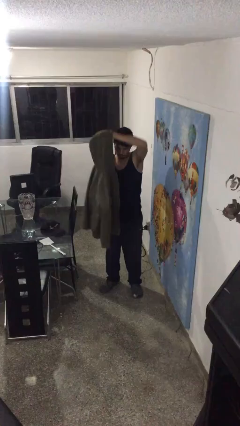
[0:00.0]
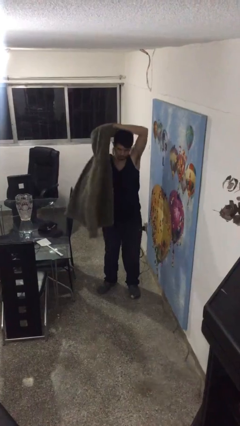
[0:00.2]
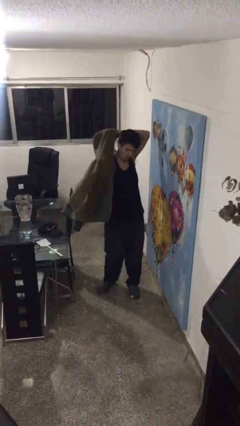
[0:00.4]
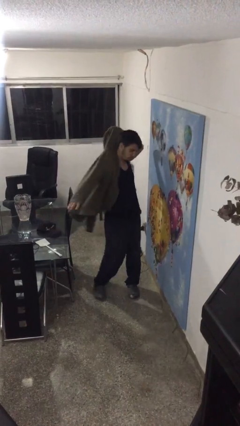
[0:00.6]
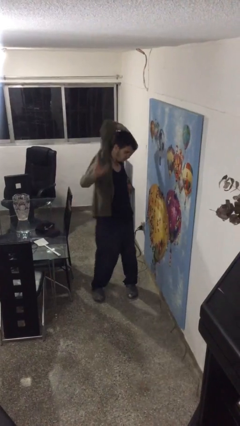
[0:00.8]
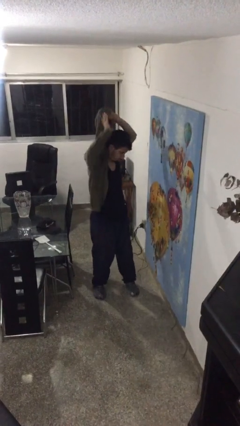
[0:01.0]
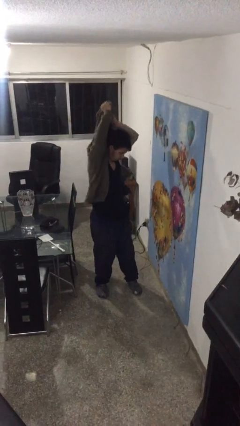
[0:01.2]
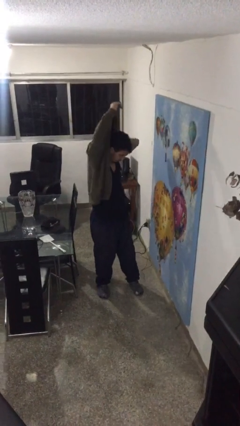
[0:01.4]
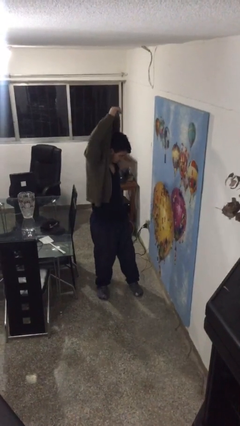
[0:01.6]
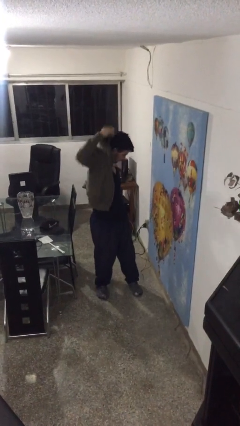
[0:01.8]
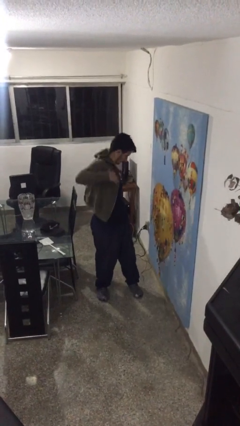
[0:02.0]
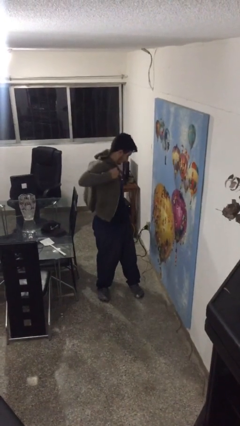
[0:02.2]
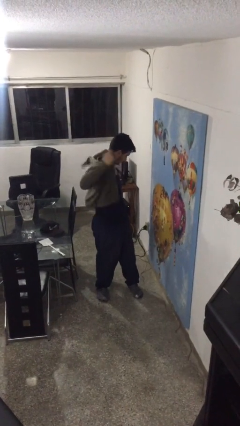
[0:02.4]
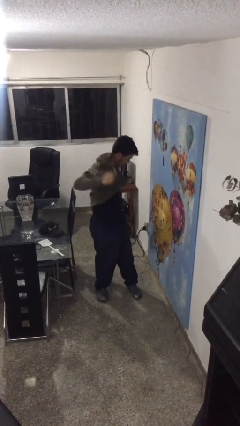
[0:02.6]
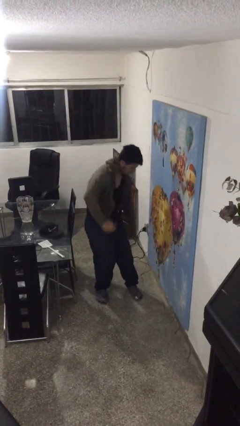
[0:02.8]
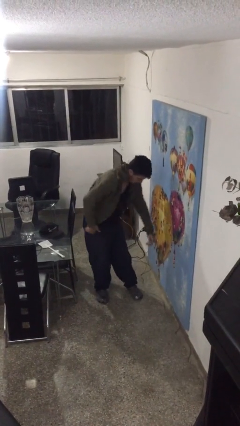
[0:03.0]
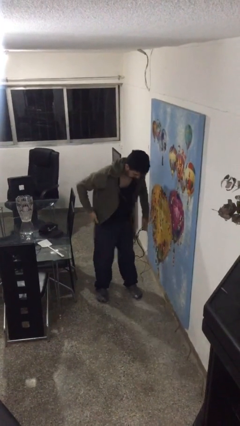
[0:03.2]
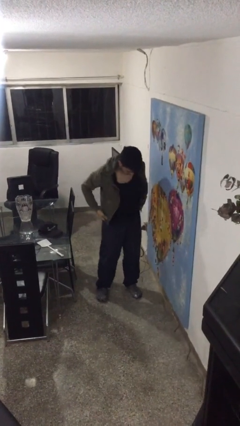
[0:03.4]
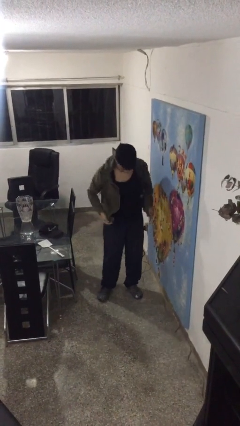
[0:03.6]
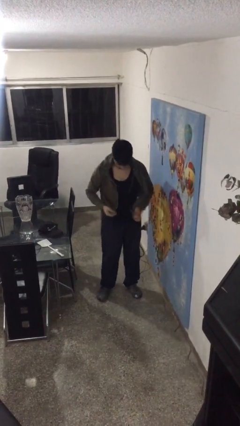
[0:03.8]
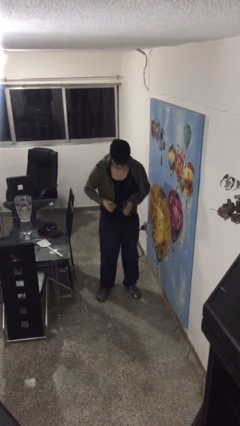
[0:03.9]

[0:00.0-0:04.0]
person puts on jacket

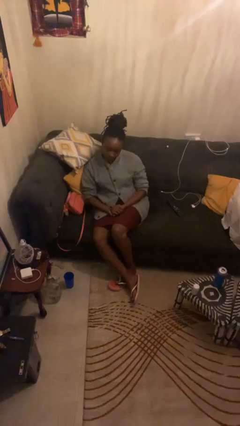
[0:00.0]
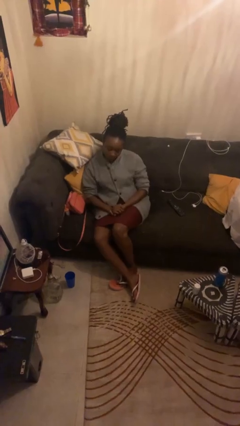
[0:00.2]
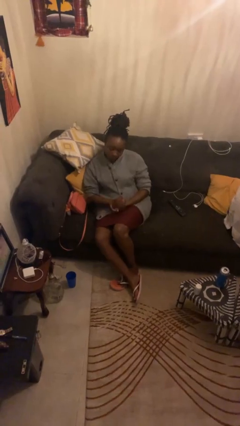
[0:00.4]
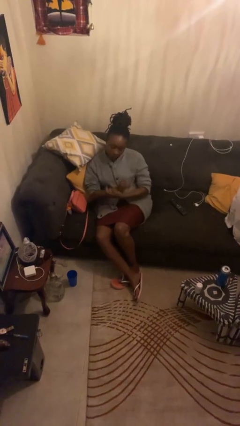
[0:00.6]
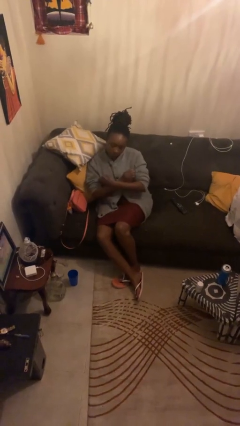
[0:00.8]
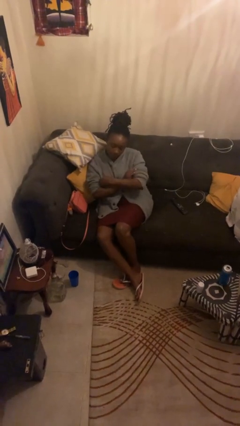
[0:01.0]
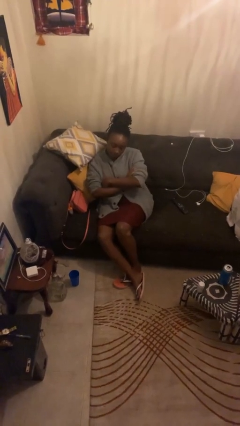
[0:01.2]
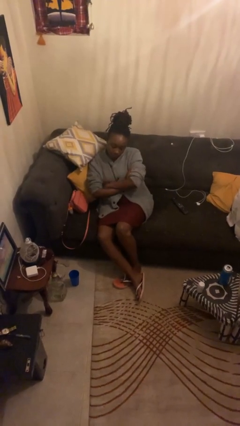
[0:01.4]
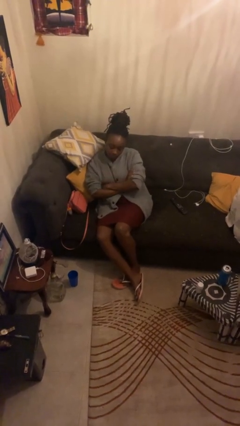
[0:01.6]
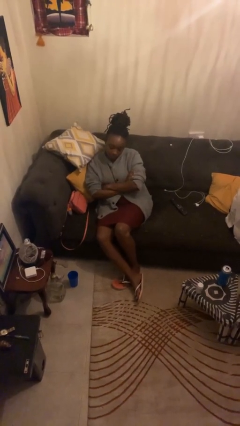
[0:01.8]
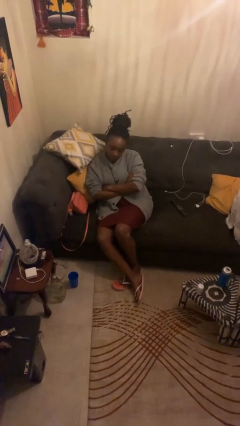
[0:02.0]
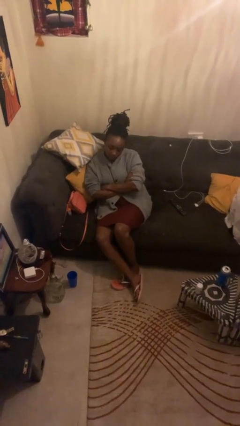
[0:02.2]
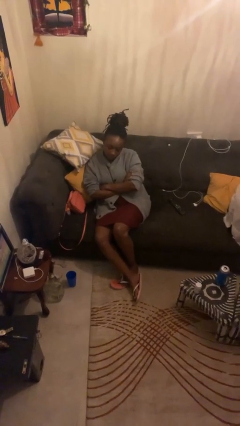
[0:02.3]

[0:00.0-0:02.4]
person crosses arms

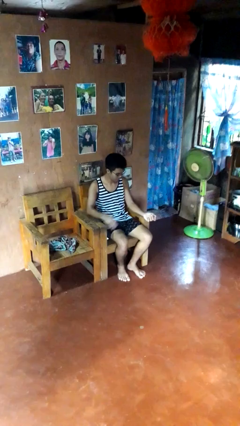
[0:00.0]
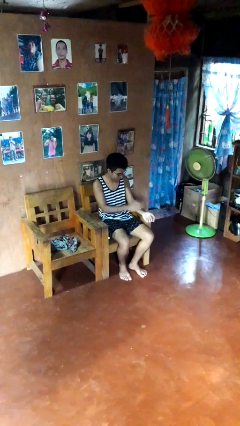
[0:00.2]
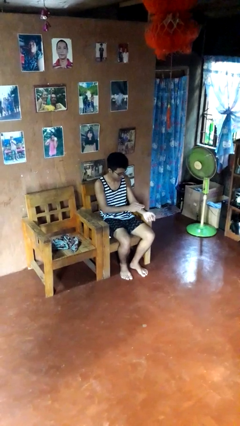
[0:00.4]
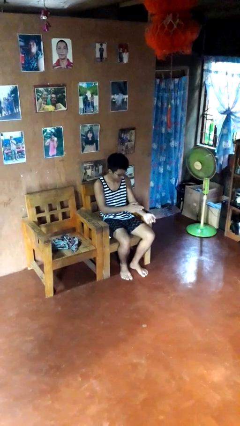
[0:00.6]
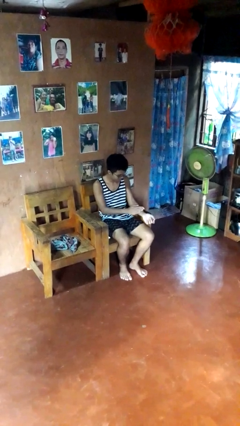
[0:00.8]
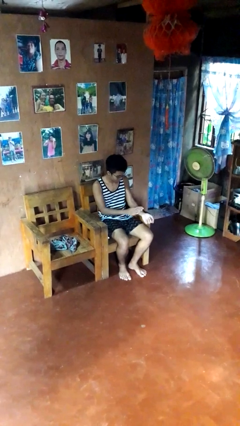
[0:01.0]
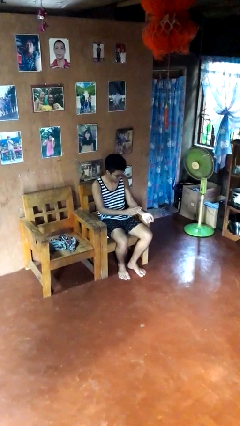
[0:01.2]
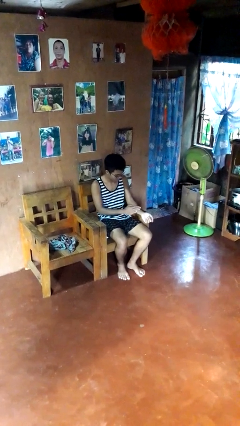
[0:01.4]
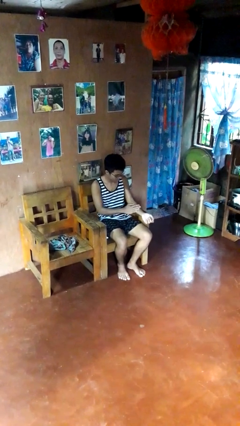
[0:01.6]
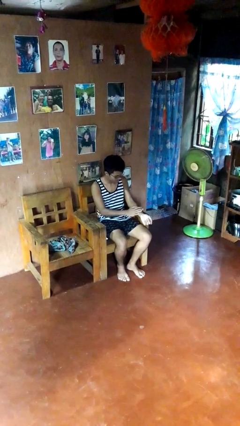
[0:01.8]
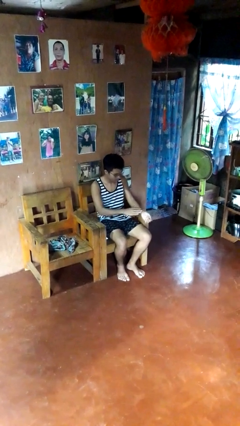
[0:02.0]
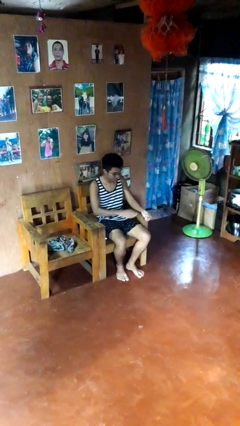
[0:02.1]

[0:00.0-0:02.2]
person swats bug

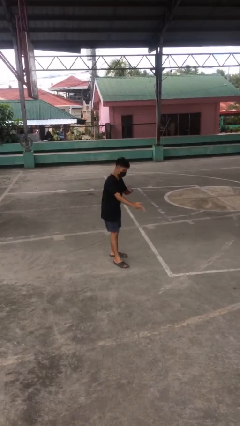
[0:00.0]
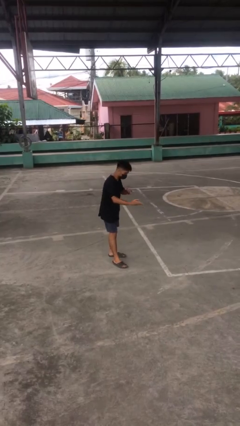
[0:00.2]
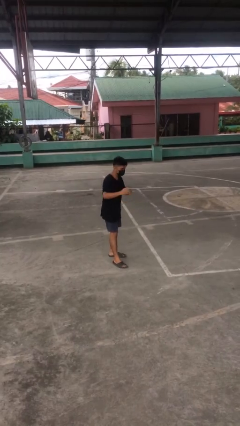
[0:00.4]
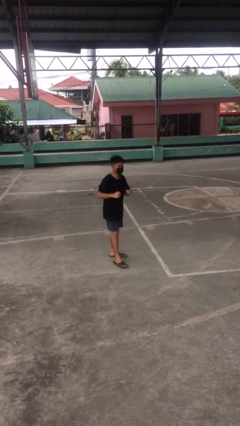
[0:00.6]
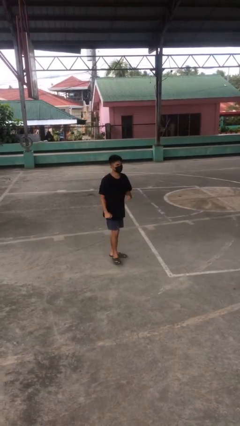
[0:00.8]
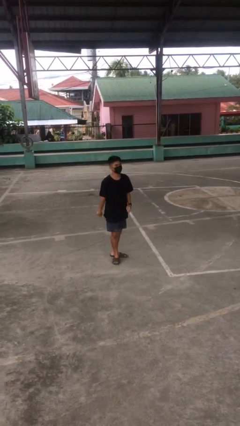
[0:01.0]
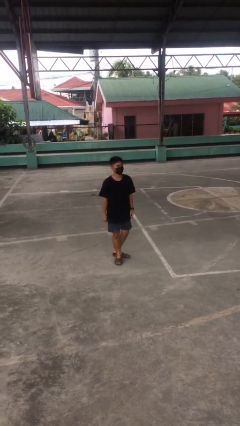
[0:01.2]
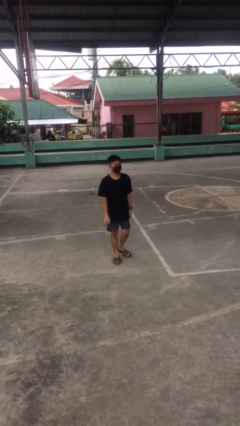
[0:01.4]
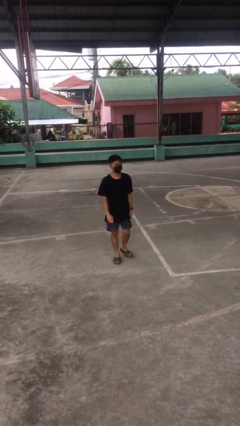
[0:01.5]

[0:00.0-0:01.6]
person karate chop

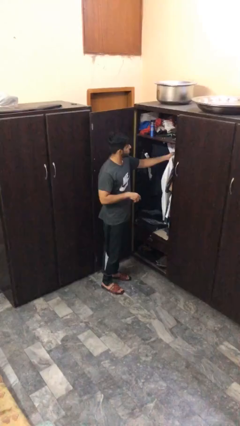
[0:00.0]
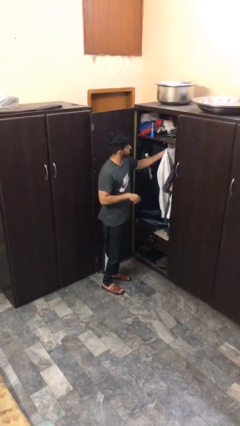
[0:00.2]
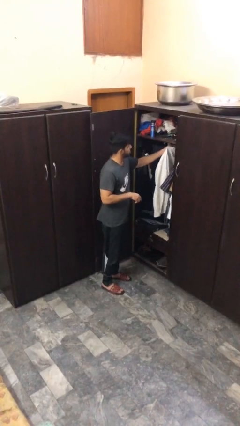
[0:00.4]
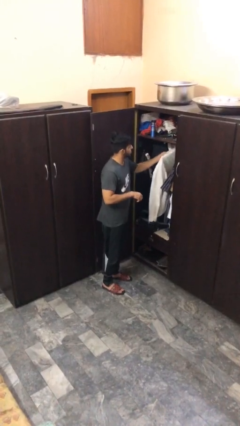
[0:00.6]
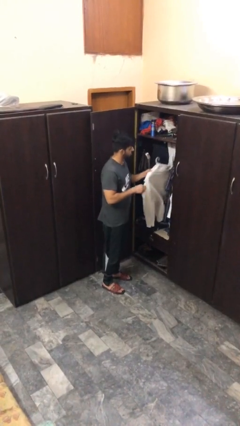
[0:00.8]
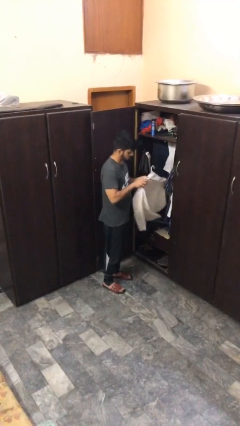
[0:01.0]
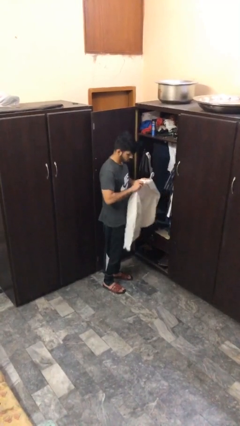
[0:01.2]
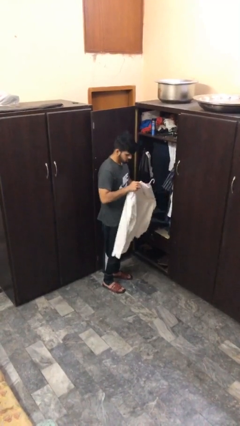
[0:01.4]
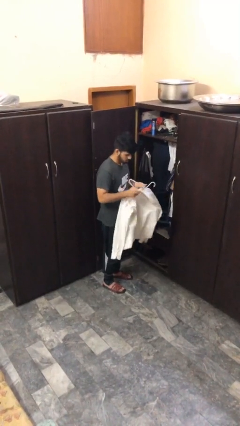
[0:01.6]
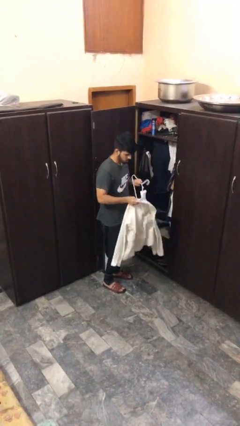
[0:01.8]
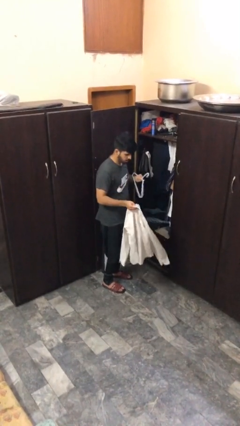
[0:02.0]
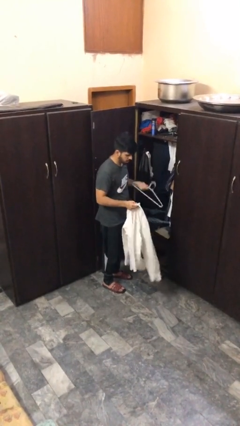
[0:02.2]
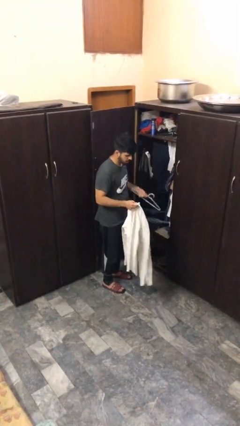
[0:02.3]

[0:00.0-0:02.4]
person takes clothes from closet

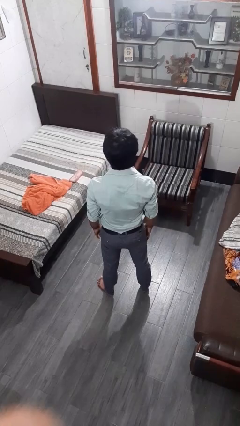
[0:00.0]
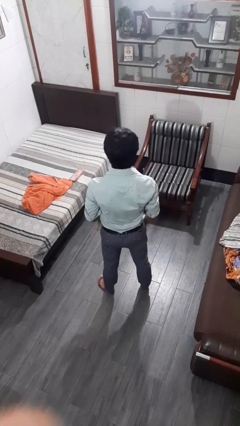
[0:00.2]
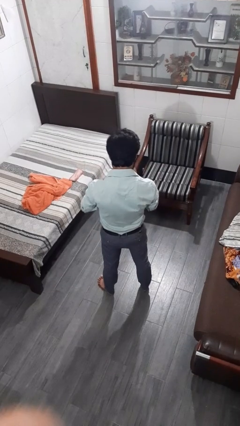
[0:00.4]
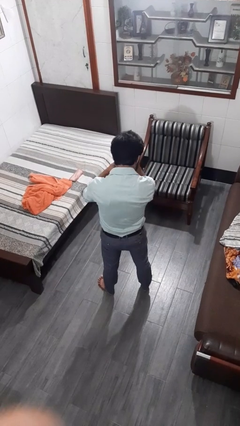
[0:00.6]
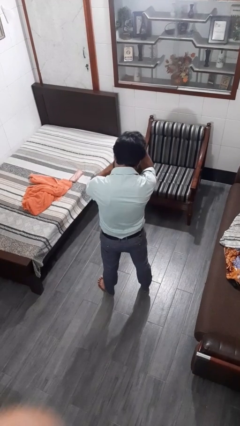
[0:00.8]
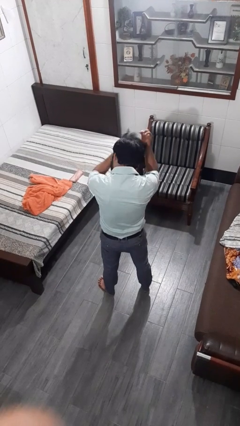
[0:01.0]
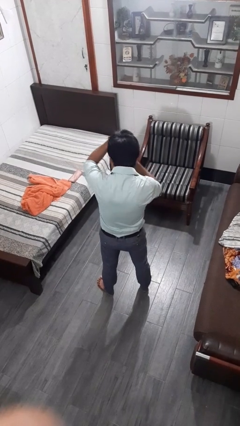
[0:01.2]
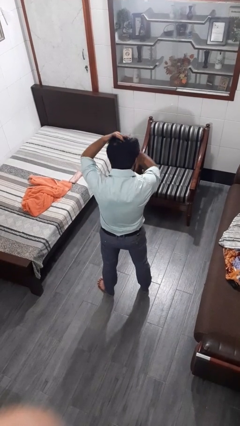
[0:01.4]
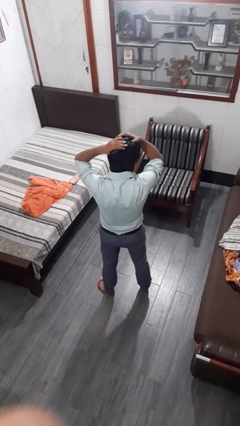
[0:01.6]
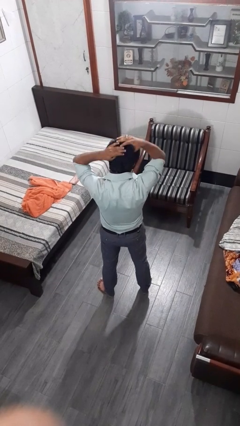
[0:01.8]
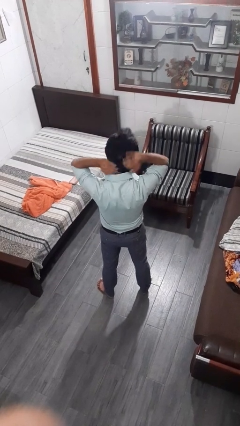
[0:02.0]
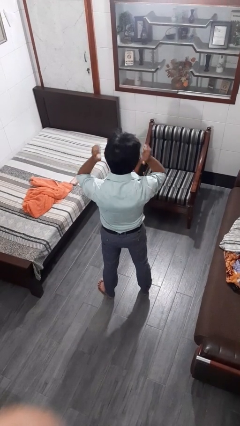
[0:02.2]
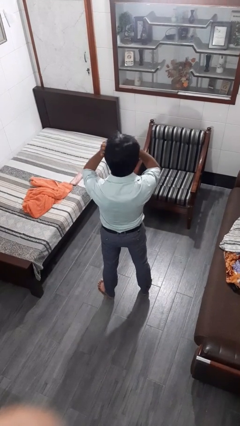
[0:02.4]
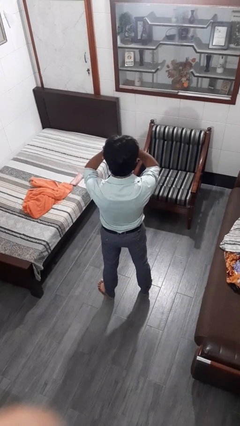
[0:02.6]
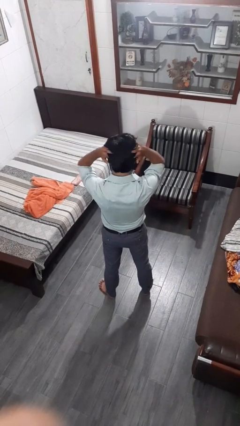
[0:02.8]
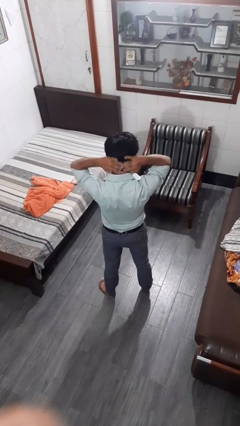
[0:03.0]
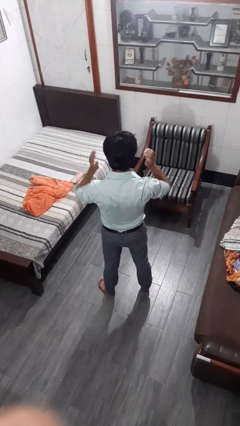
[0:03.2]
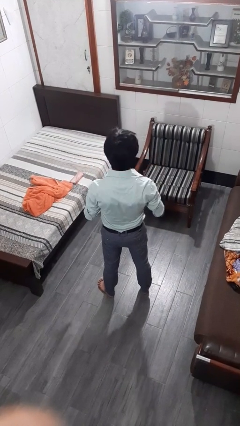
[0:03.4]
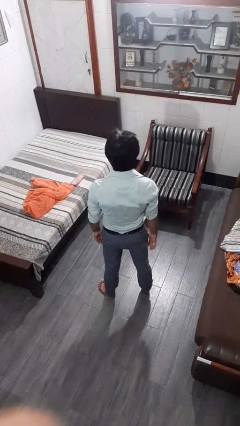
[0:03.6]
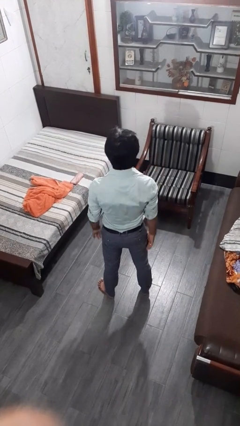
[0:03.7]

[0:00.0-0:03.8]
person strokes hair

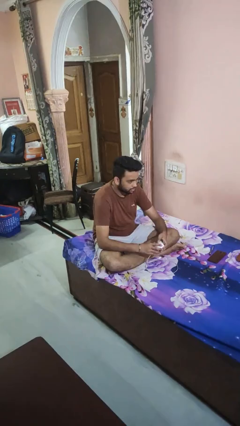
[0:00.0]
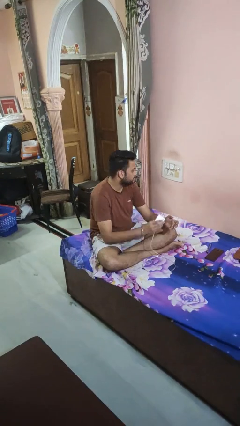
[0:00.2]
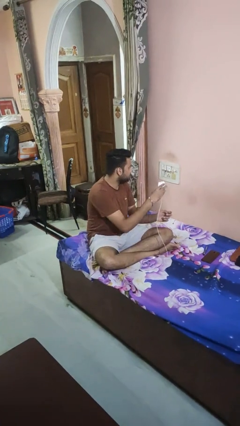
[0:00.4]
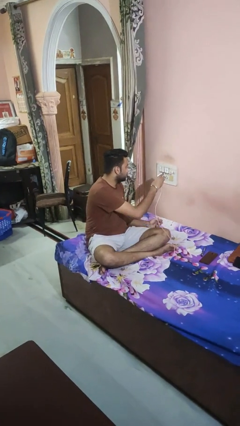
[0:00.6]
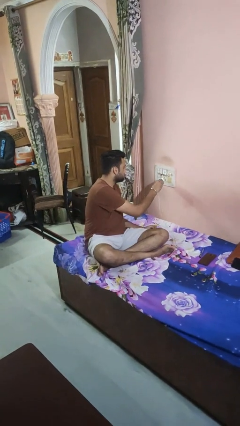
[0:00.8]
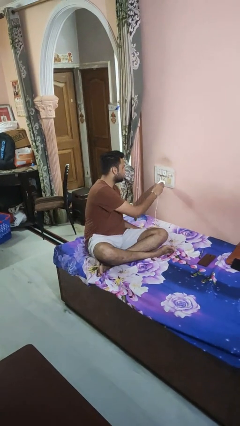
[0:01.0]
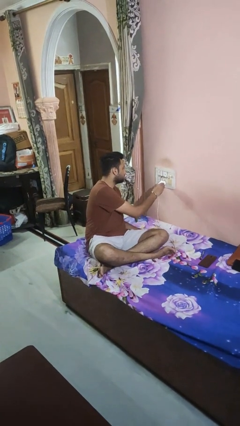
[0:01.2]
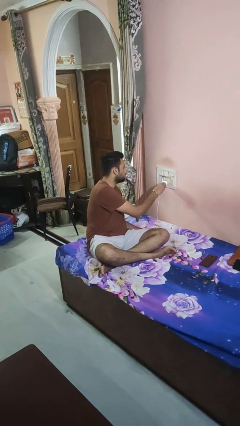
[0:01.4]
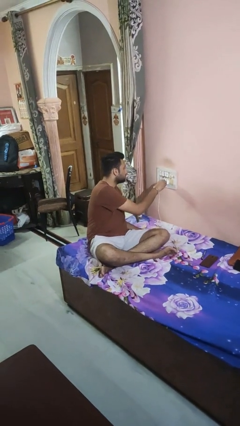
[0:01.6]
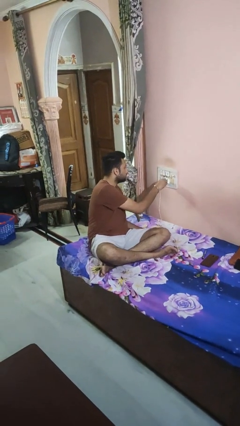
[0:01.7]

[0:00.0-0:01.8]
person plugs into electrical socket
